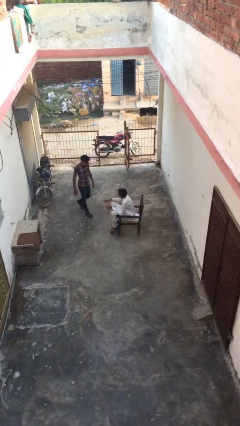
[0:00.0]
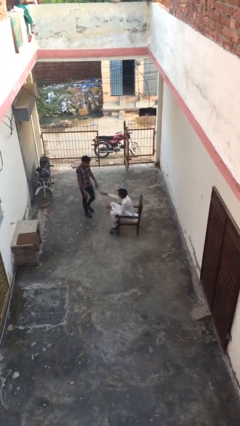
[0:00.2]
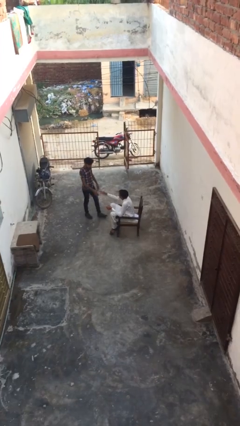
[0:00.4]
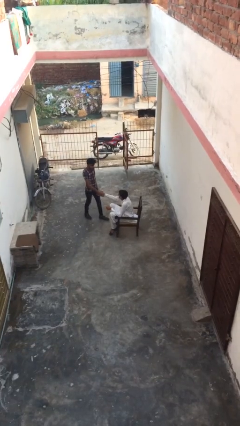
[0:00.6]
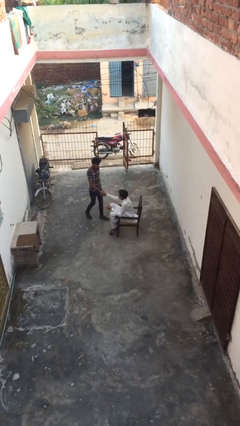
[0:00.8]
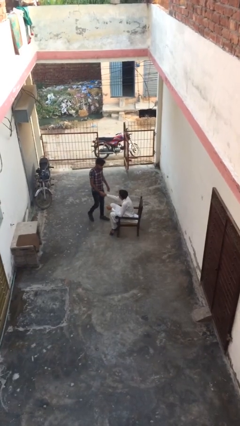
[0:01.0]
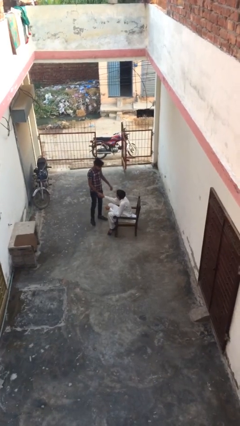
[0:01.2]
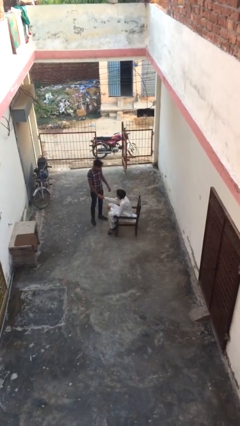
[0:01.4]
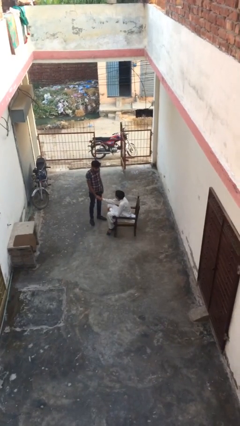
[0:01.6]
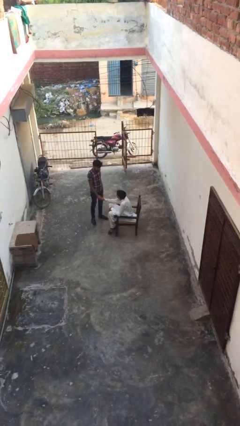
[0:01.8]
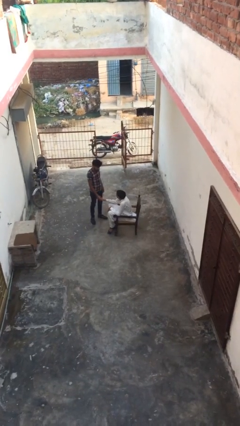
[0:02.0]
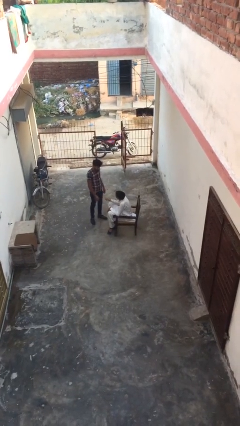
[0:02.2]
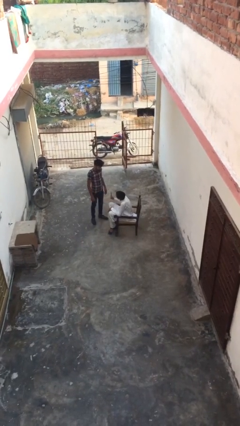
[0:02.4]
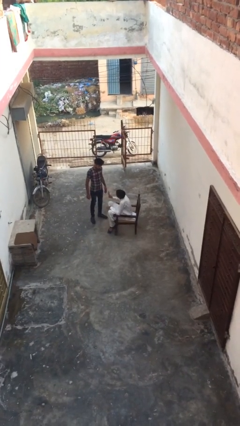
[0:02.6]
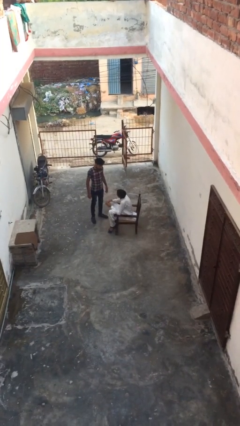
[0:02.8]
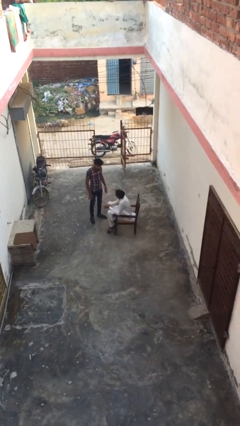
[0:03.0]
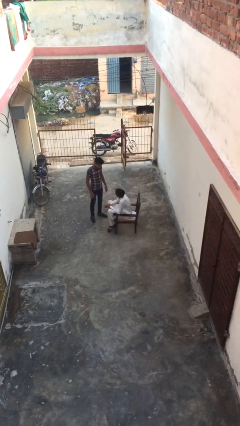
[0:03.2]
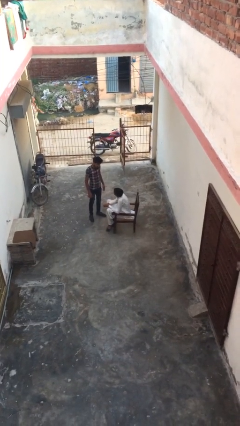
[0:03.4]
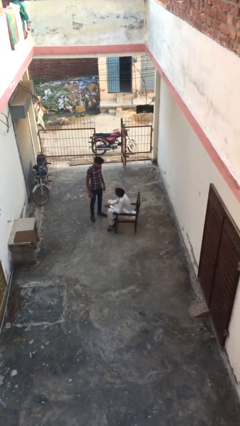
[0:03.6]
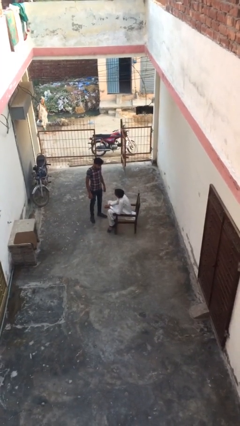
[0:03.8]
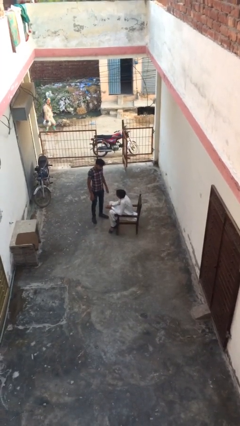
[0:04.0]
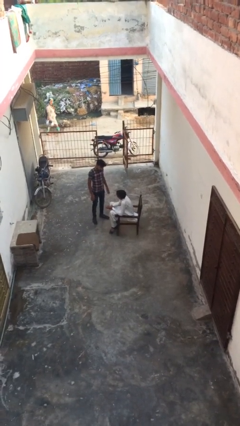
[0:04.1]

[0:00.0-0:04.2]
person shakes hand

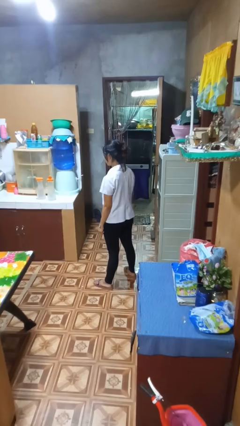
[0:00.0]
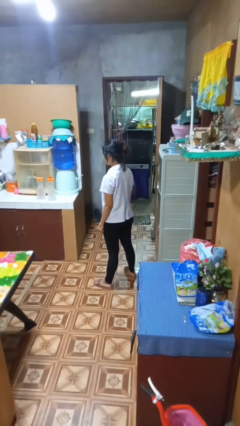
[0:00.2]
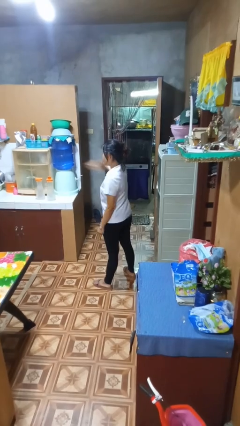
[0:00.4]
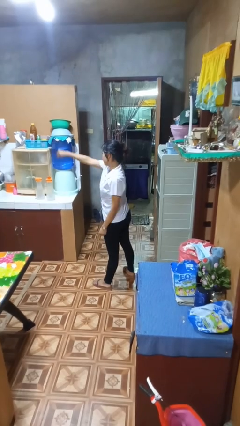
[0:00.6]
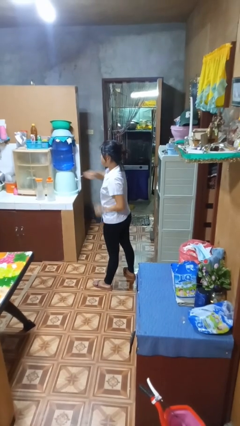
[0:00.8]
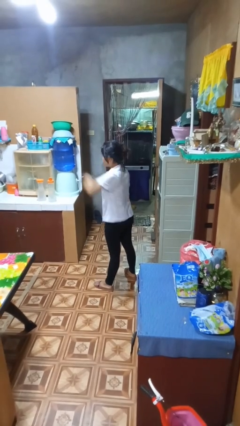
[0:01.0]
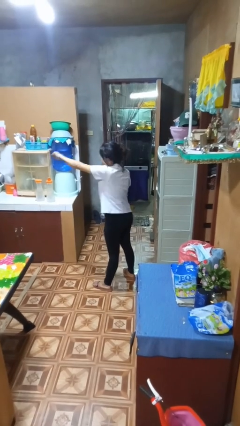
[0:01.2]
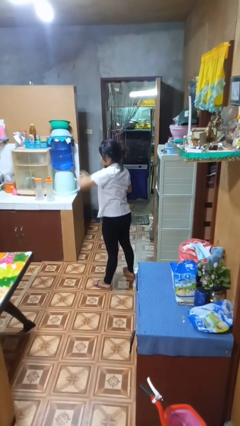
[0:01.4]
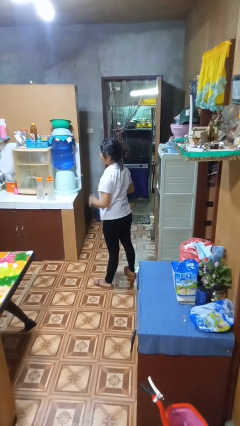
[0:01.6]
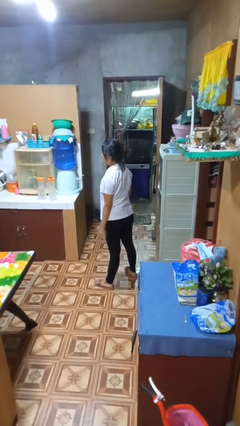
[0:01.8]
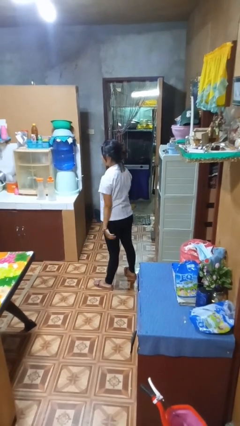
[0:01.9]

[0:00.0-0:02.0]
person punches

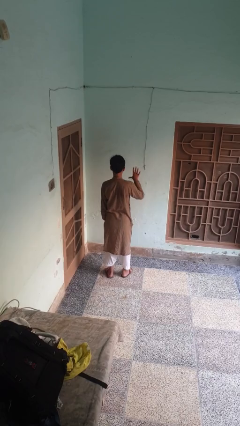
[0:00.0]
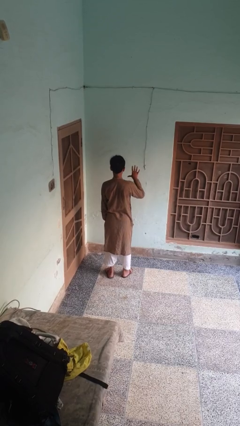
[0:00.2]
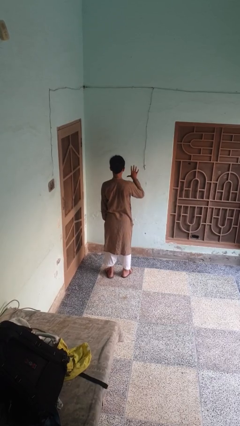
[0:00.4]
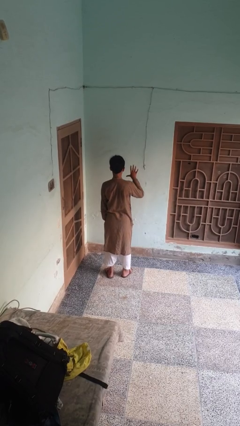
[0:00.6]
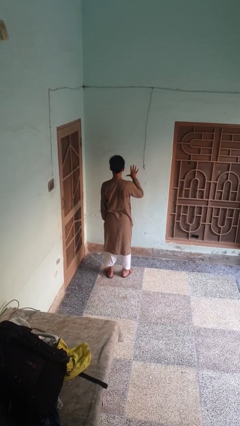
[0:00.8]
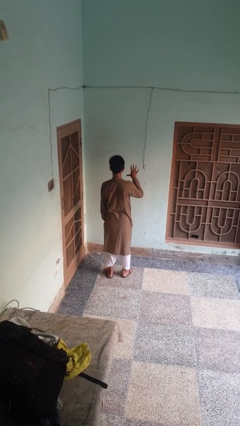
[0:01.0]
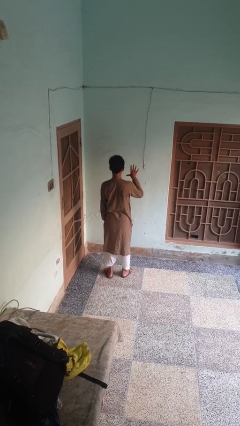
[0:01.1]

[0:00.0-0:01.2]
person gestures number five

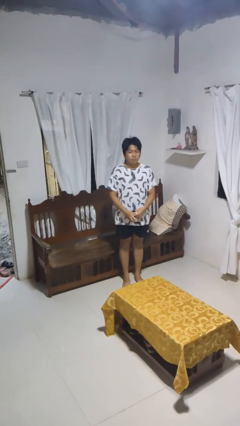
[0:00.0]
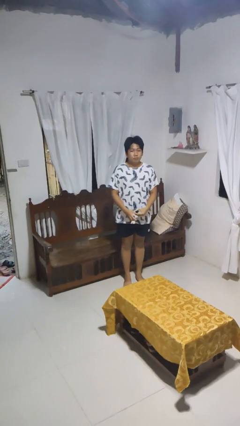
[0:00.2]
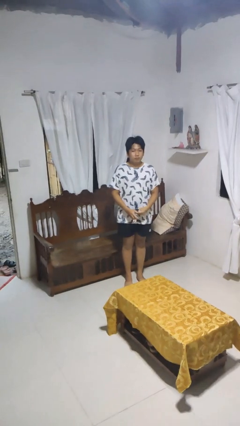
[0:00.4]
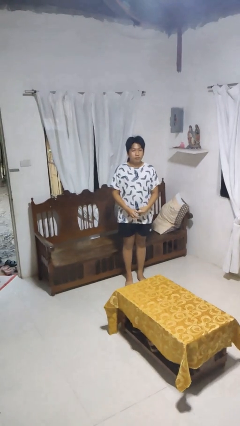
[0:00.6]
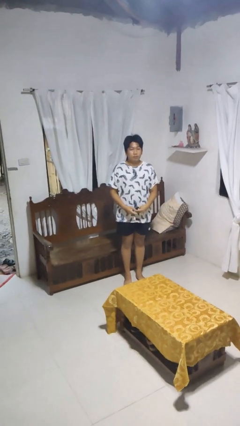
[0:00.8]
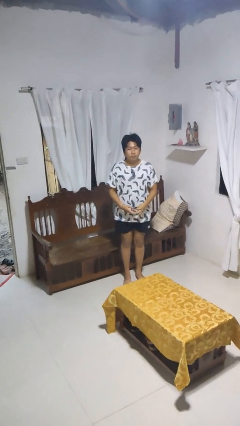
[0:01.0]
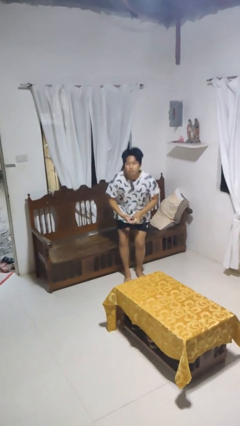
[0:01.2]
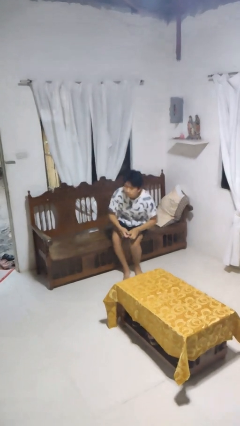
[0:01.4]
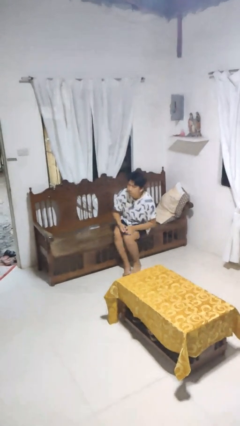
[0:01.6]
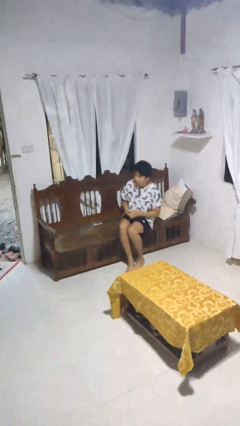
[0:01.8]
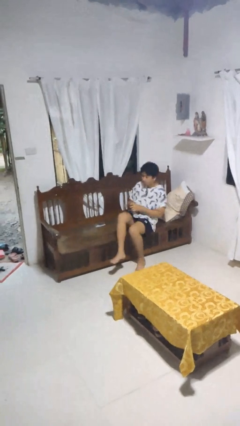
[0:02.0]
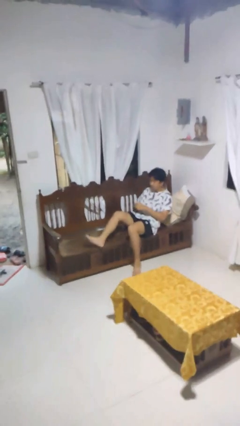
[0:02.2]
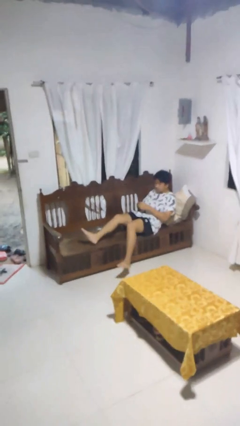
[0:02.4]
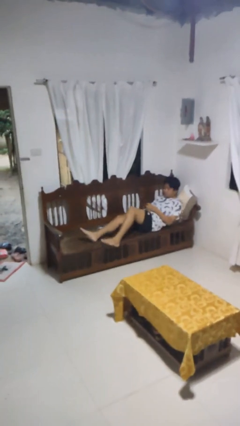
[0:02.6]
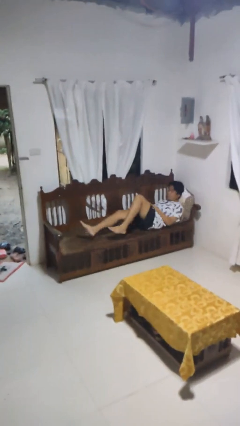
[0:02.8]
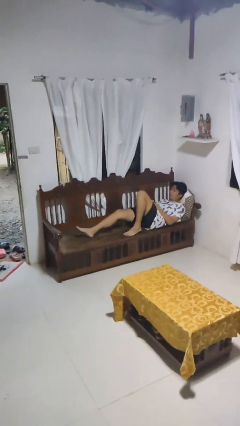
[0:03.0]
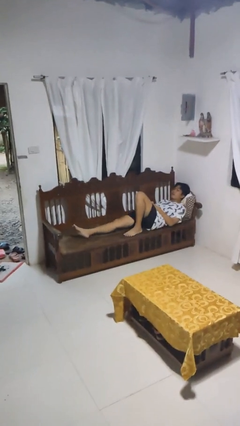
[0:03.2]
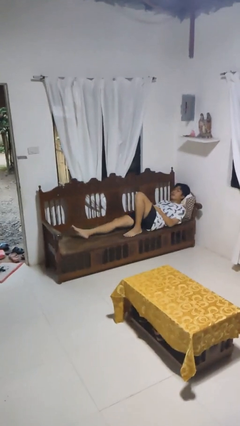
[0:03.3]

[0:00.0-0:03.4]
person lies down on couch

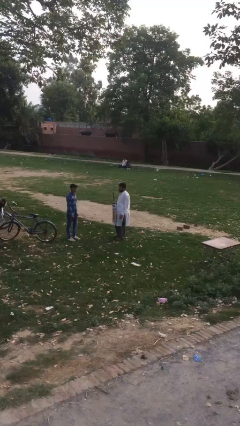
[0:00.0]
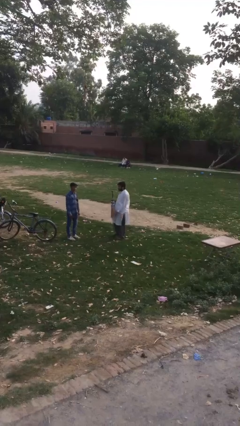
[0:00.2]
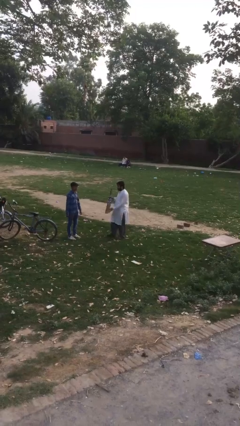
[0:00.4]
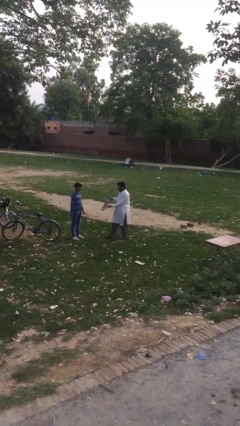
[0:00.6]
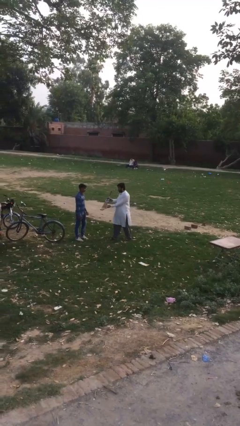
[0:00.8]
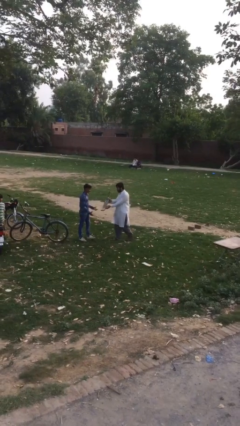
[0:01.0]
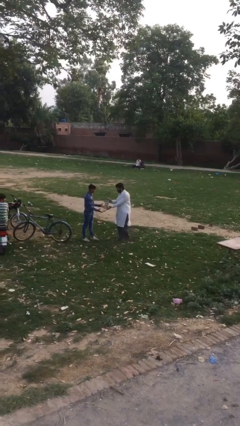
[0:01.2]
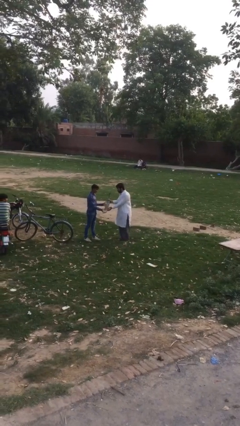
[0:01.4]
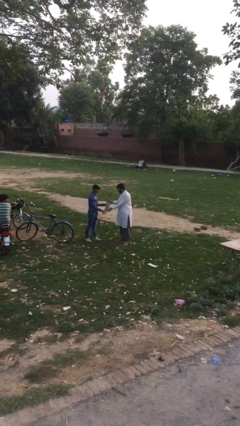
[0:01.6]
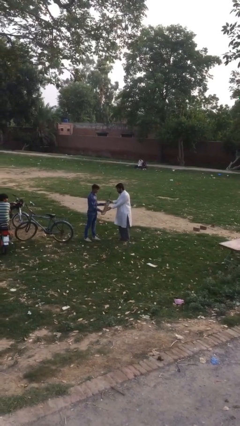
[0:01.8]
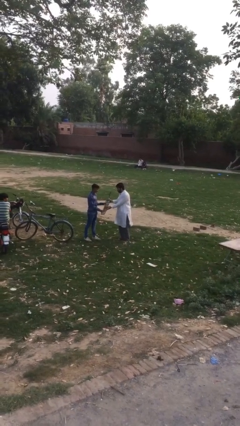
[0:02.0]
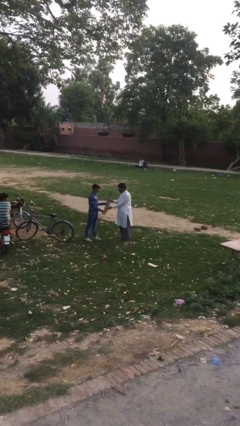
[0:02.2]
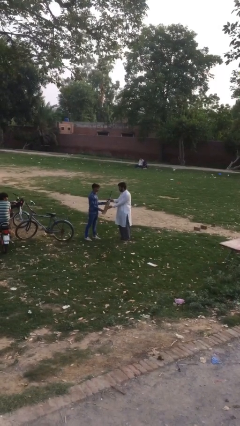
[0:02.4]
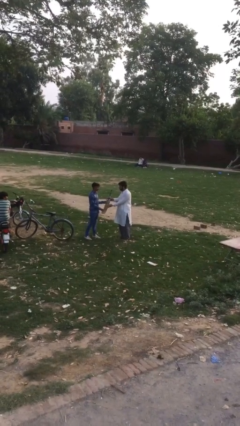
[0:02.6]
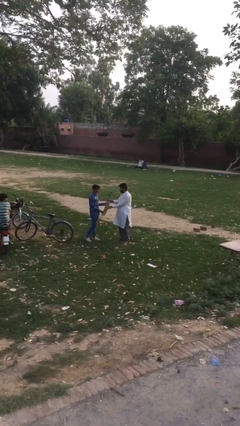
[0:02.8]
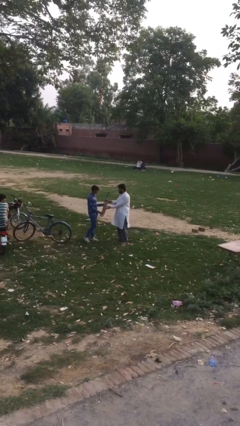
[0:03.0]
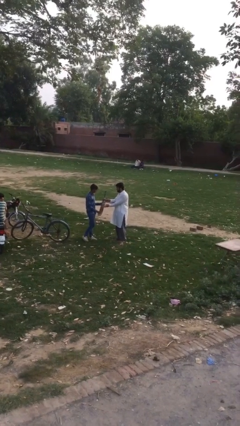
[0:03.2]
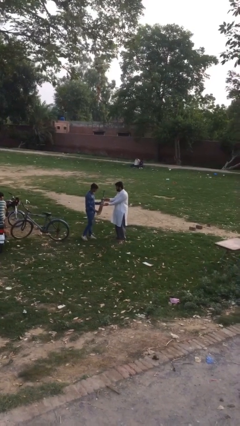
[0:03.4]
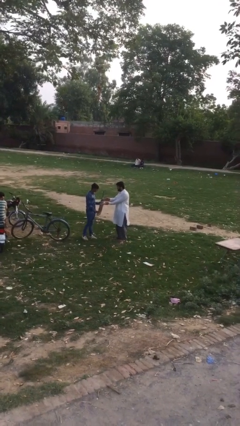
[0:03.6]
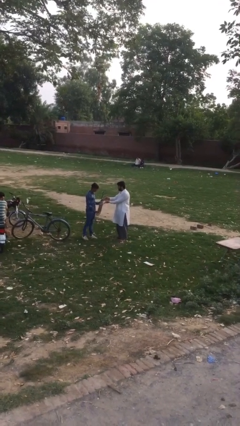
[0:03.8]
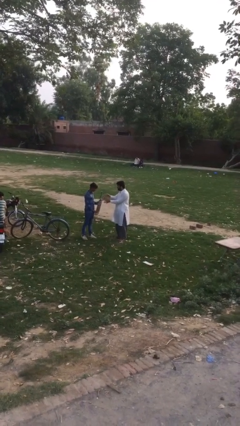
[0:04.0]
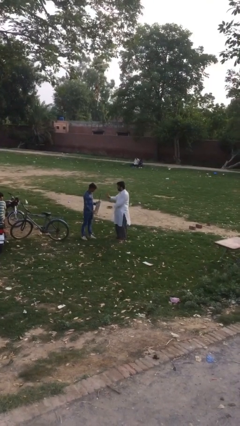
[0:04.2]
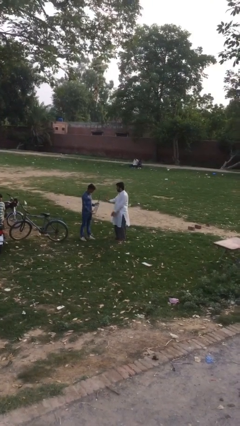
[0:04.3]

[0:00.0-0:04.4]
person transfers object to person

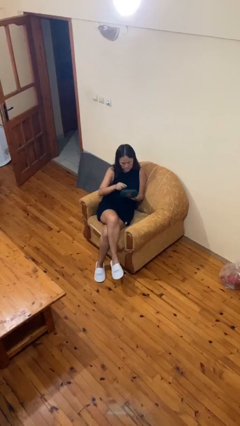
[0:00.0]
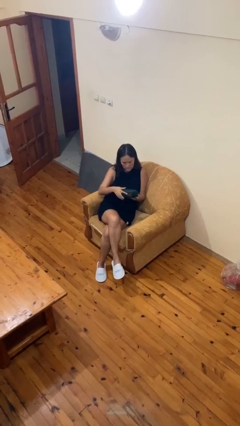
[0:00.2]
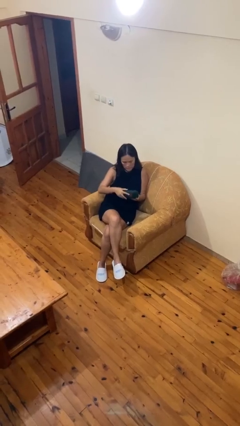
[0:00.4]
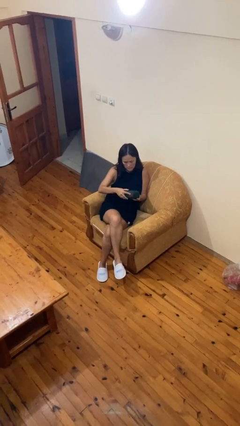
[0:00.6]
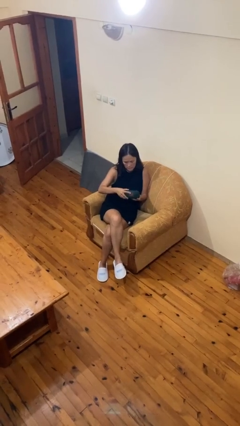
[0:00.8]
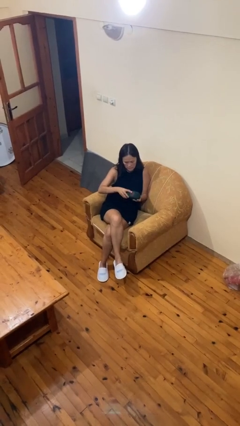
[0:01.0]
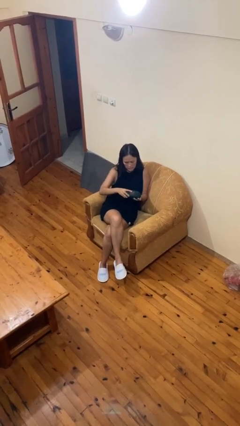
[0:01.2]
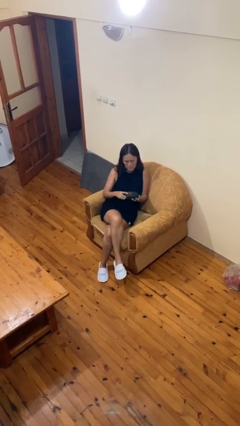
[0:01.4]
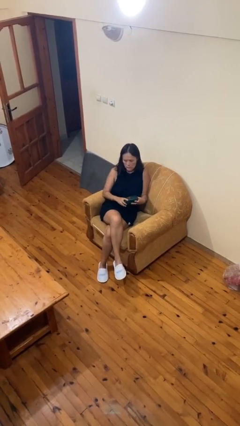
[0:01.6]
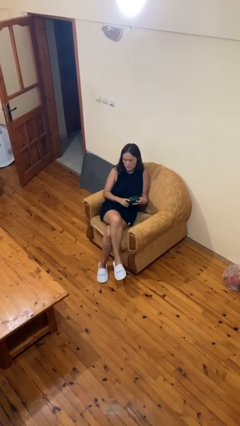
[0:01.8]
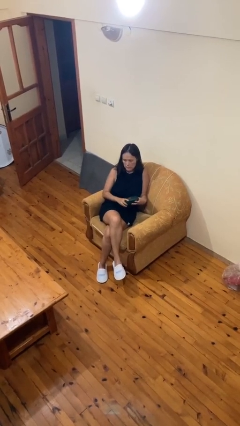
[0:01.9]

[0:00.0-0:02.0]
person closes jewelry box
